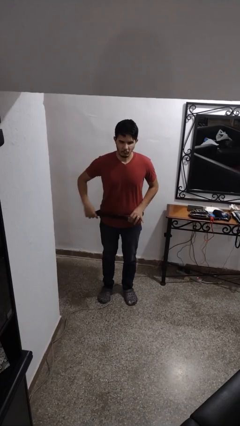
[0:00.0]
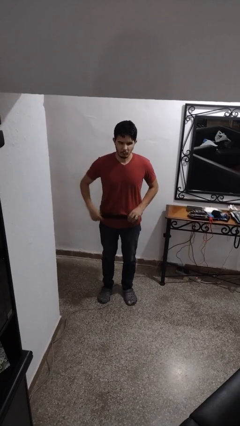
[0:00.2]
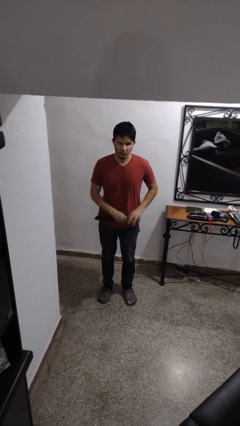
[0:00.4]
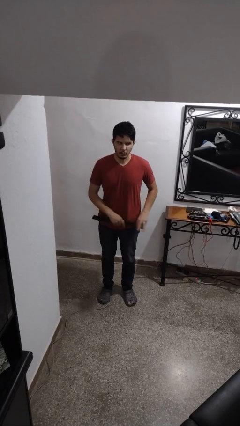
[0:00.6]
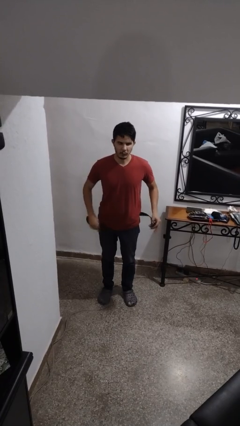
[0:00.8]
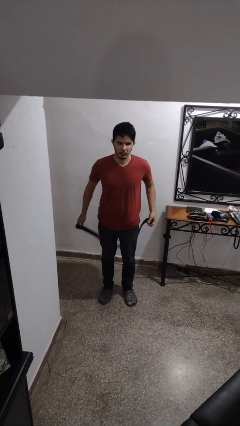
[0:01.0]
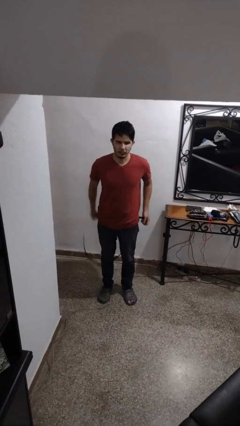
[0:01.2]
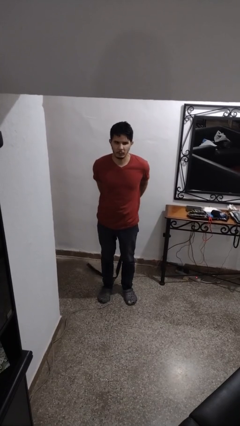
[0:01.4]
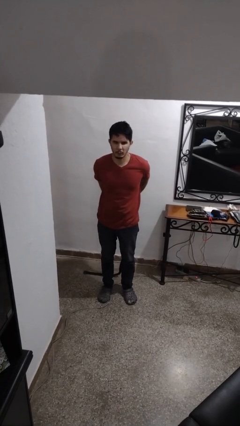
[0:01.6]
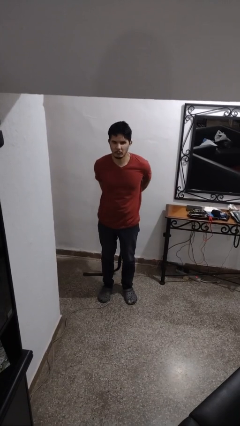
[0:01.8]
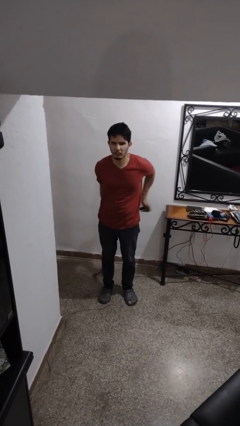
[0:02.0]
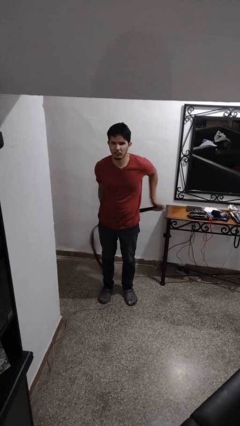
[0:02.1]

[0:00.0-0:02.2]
person takes off belt

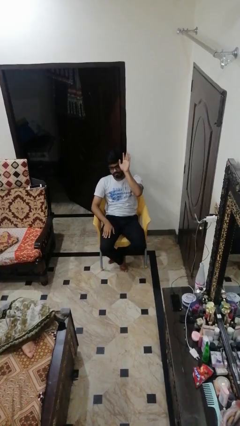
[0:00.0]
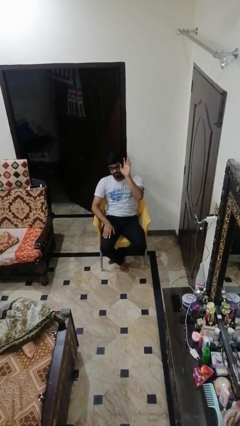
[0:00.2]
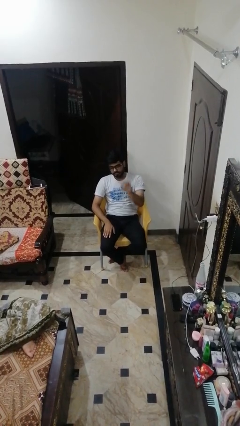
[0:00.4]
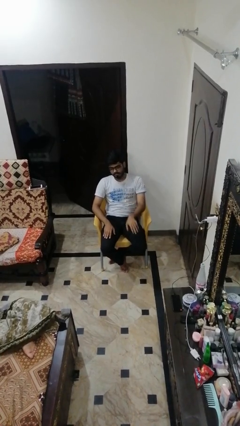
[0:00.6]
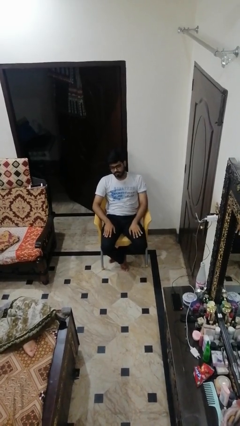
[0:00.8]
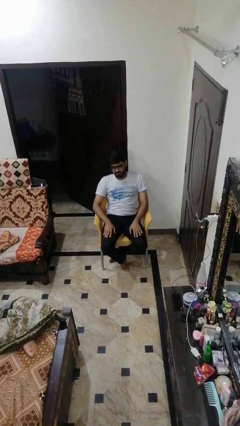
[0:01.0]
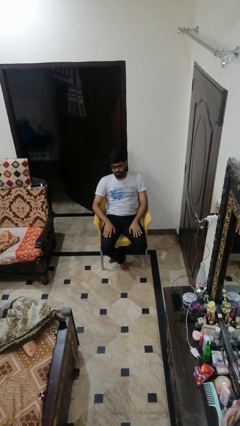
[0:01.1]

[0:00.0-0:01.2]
person gestures lower hand

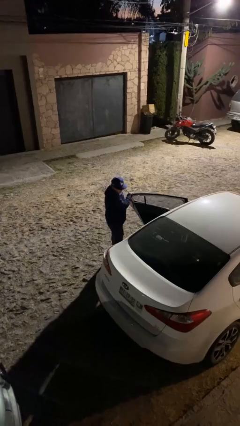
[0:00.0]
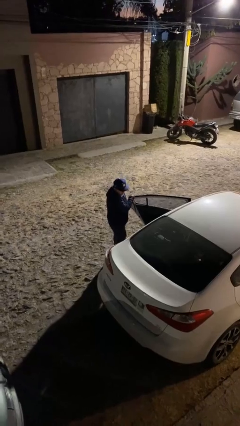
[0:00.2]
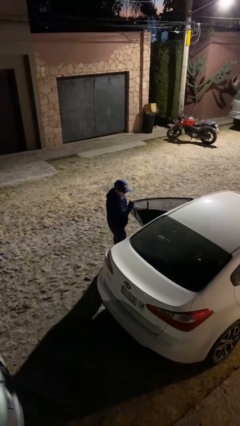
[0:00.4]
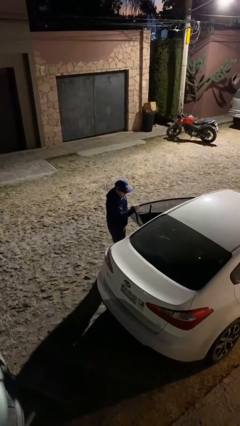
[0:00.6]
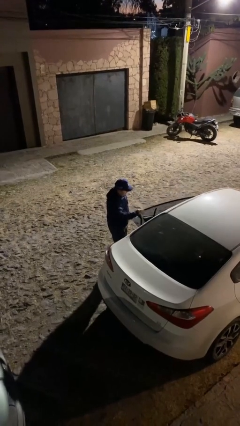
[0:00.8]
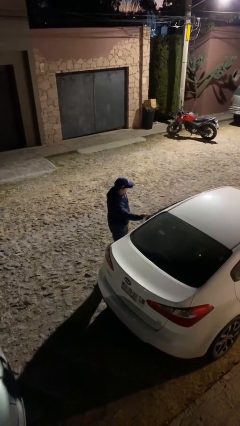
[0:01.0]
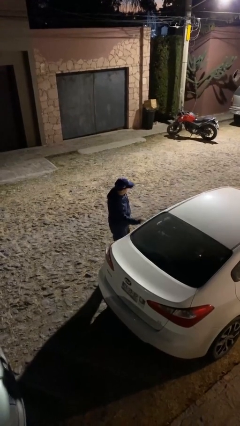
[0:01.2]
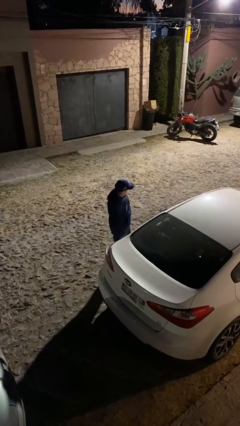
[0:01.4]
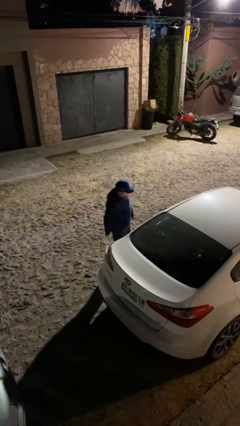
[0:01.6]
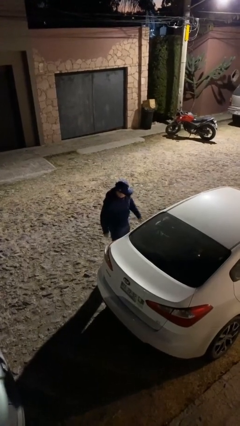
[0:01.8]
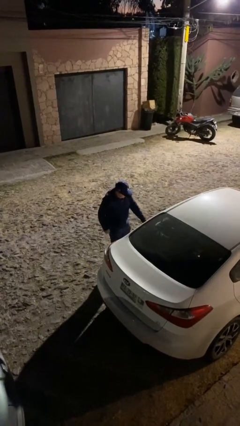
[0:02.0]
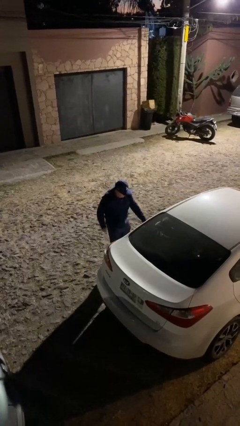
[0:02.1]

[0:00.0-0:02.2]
person closes car door

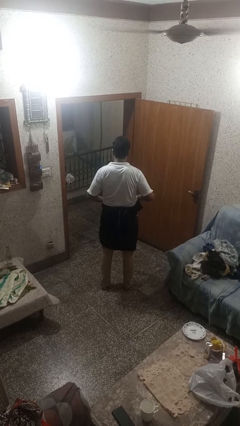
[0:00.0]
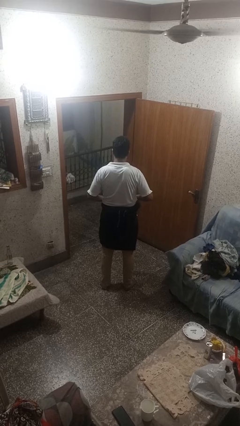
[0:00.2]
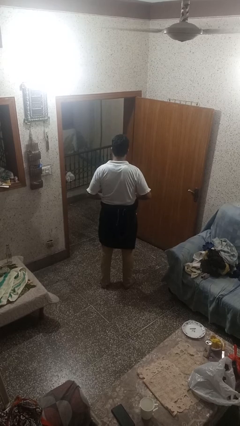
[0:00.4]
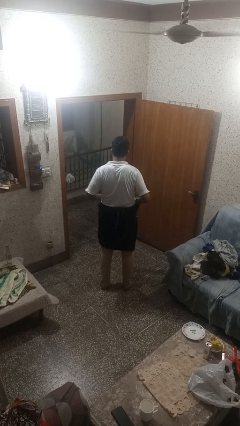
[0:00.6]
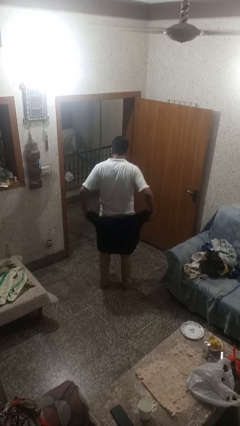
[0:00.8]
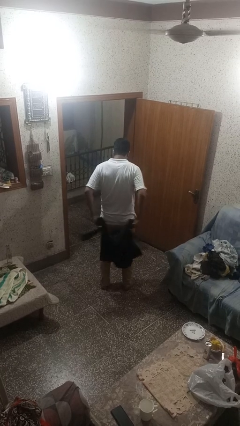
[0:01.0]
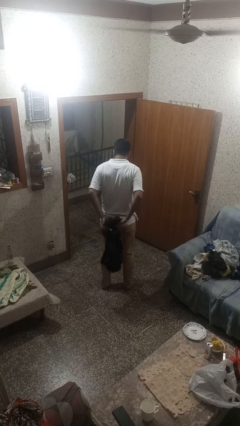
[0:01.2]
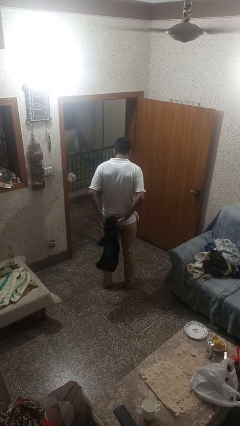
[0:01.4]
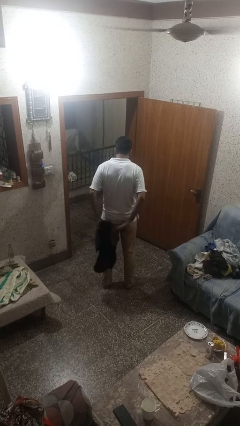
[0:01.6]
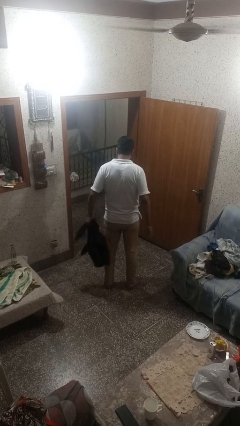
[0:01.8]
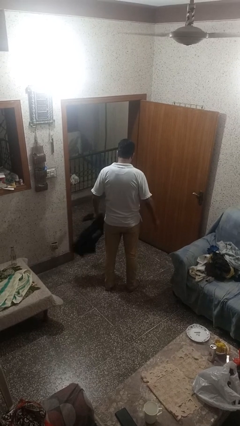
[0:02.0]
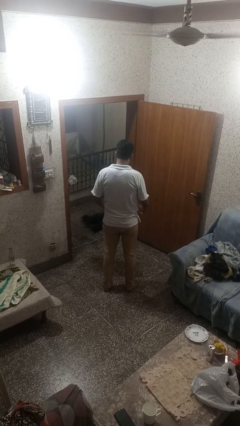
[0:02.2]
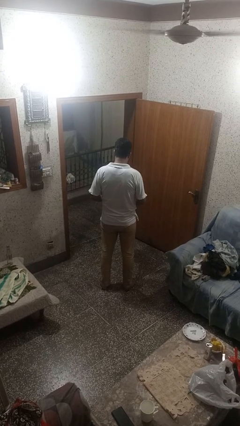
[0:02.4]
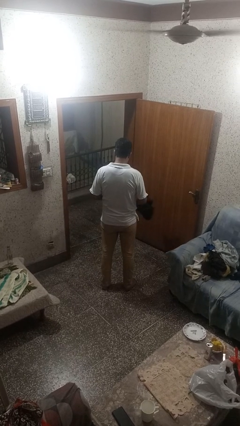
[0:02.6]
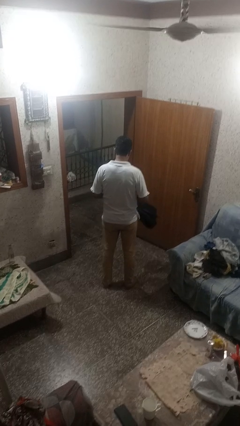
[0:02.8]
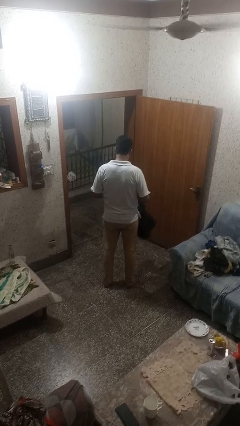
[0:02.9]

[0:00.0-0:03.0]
person unties jacket around waist

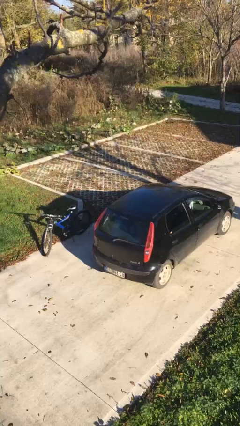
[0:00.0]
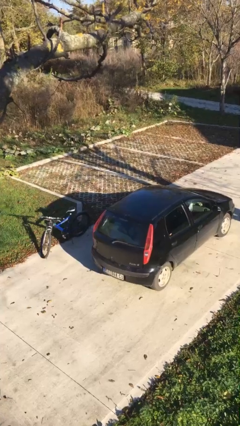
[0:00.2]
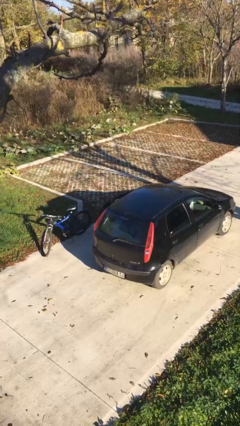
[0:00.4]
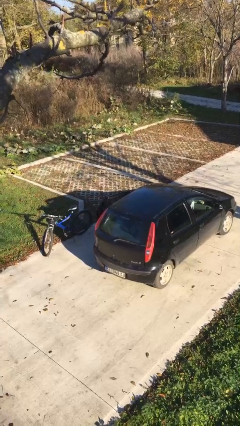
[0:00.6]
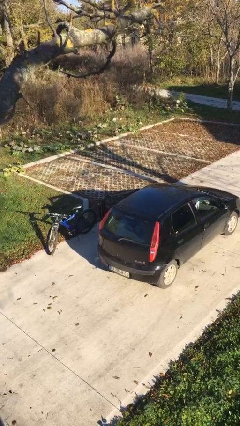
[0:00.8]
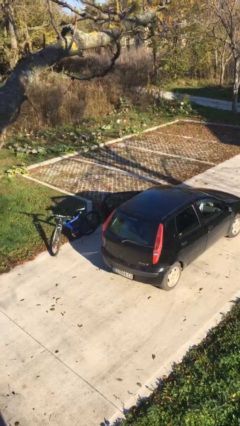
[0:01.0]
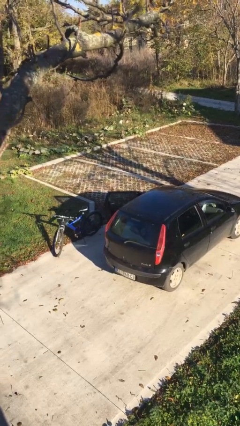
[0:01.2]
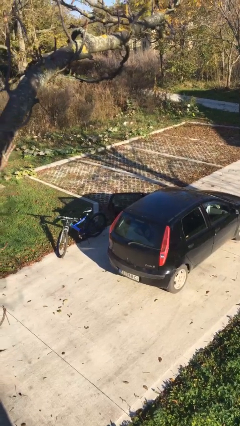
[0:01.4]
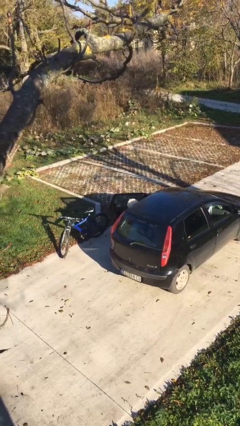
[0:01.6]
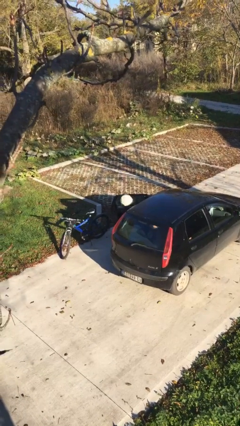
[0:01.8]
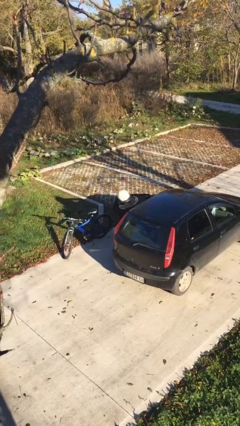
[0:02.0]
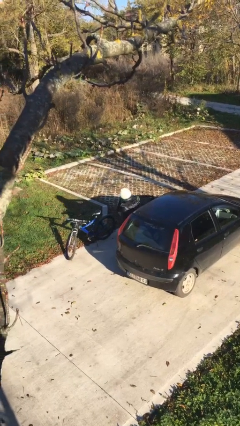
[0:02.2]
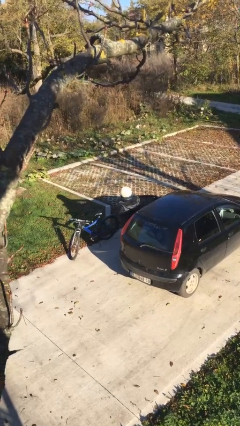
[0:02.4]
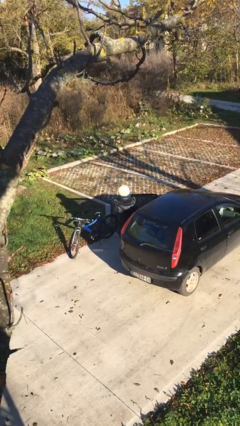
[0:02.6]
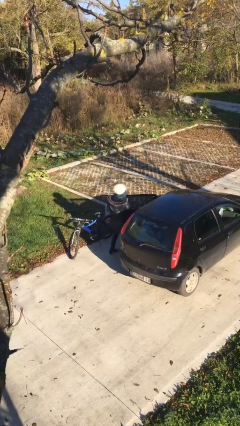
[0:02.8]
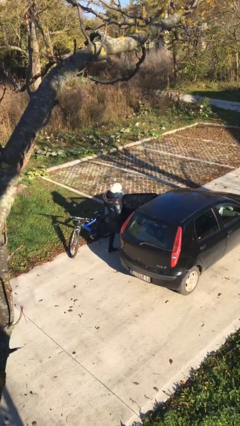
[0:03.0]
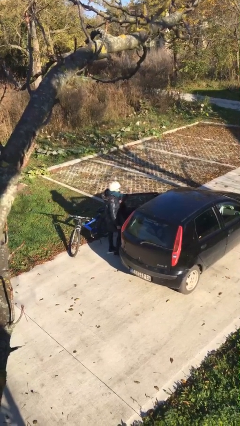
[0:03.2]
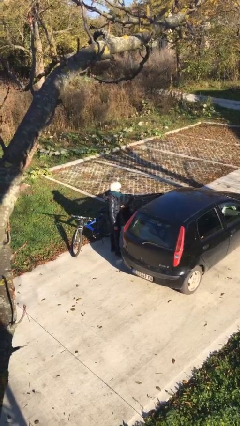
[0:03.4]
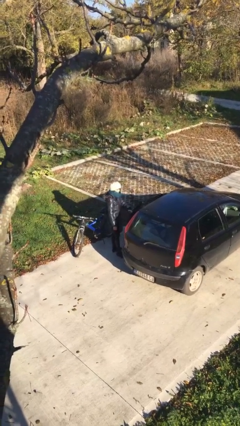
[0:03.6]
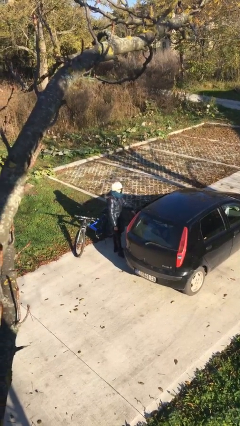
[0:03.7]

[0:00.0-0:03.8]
person exits car

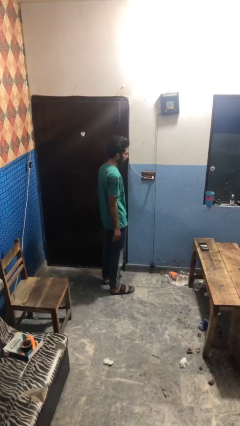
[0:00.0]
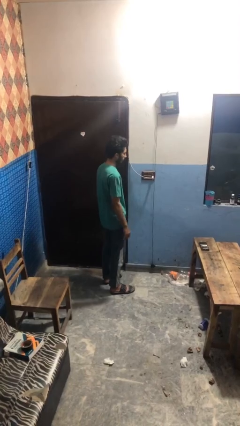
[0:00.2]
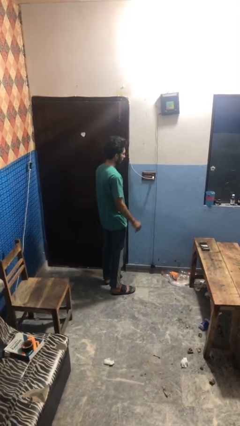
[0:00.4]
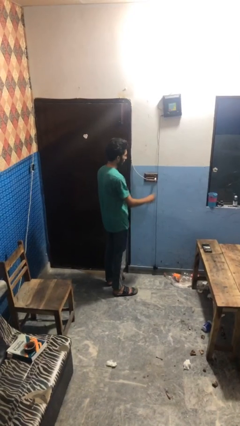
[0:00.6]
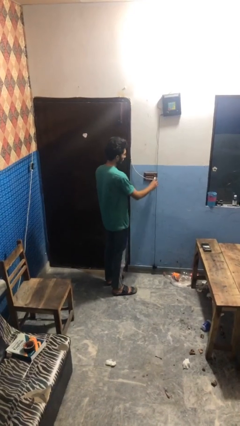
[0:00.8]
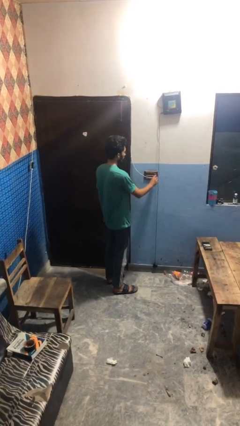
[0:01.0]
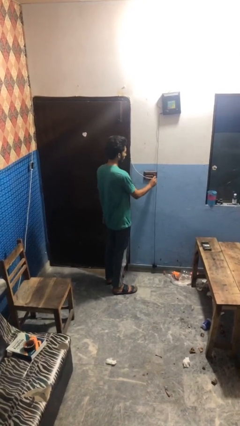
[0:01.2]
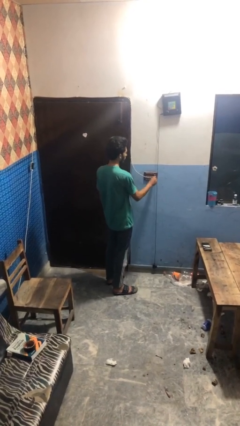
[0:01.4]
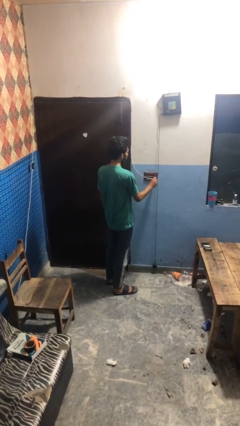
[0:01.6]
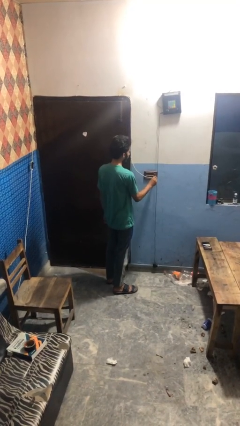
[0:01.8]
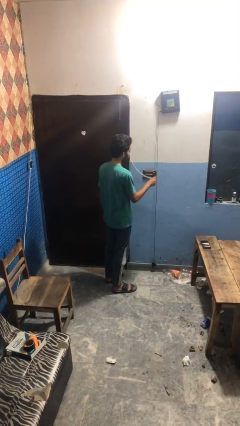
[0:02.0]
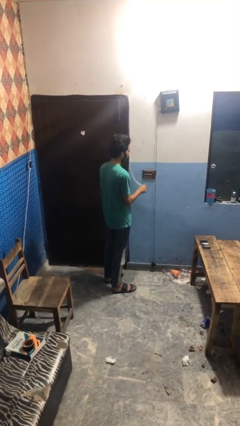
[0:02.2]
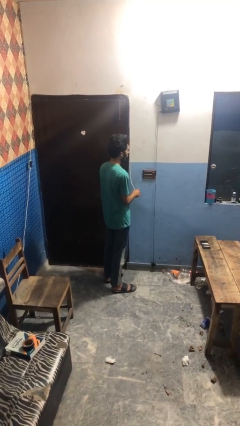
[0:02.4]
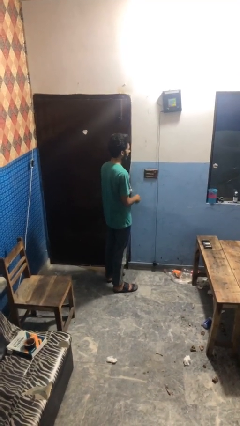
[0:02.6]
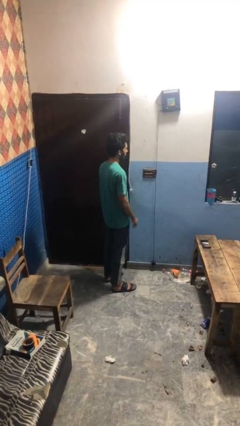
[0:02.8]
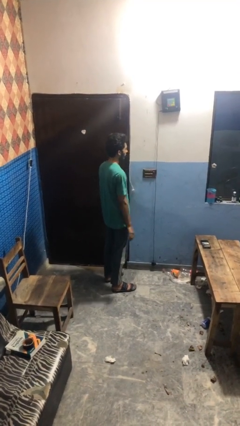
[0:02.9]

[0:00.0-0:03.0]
person unplugs from electrical socket

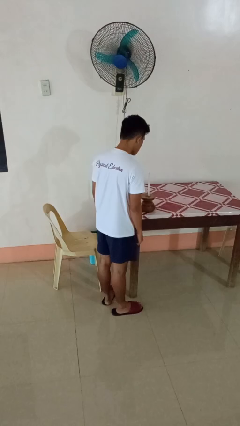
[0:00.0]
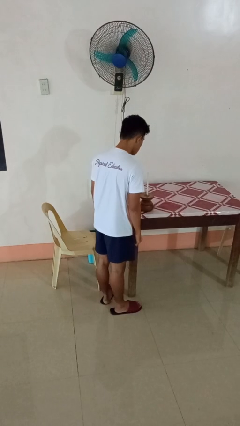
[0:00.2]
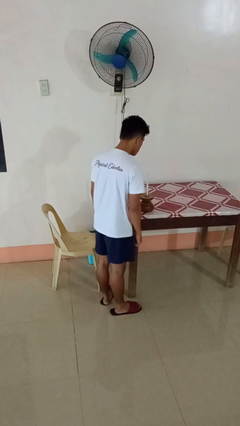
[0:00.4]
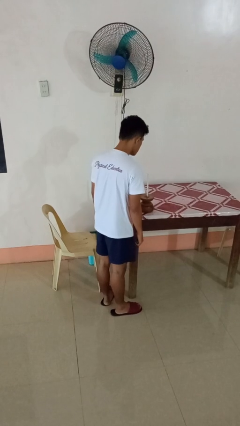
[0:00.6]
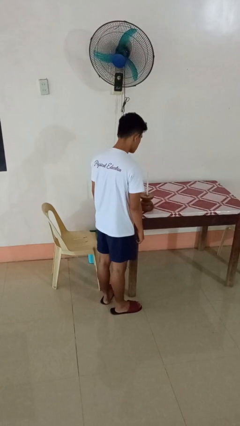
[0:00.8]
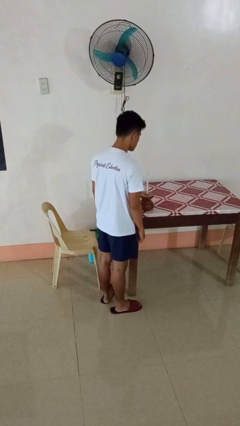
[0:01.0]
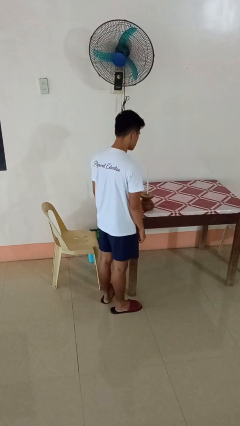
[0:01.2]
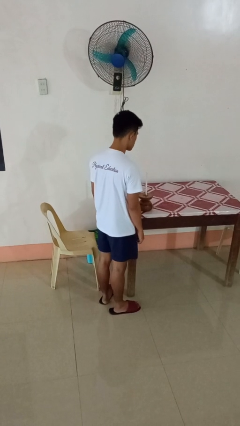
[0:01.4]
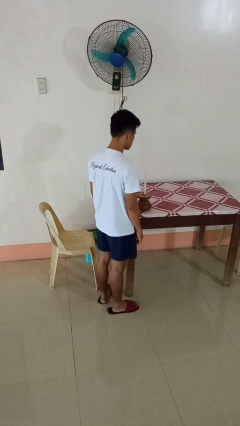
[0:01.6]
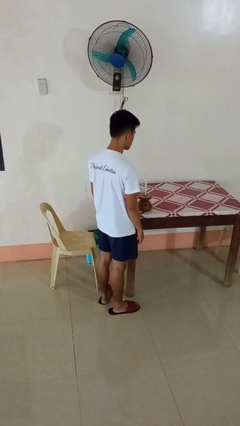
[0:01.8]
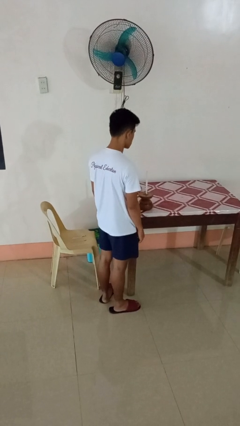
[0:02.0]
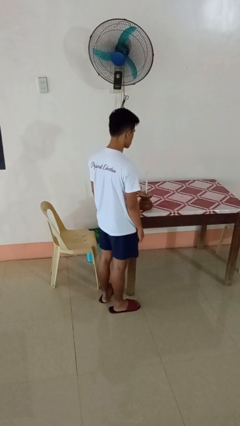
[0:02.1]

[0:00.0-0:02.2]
person extinguishes candle
